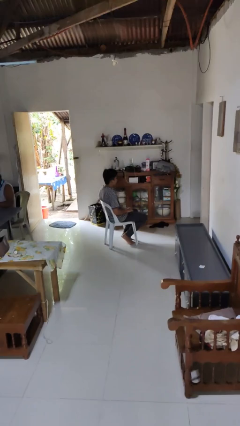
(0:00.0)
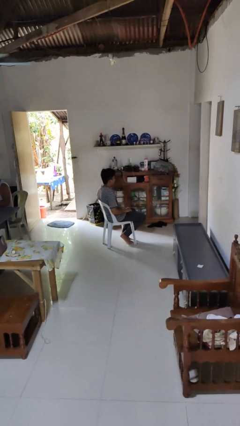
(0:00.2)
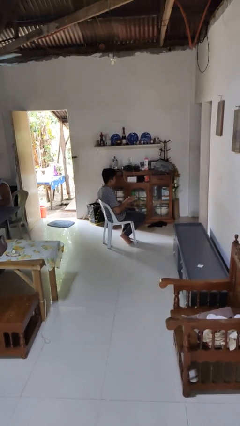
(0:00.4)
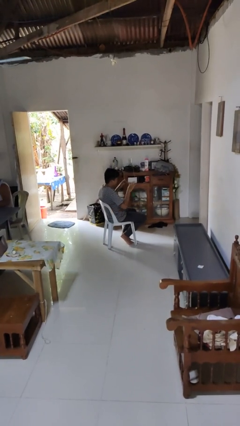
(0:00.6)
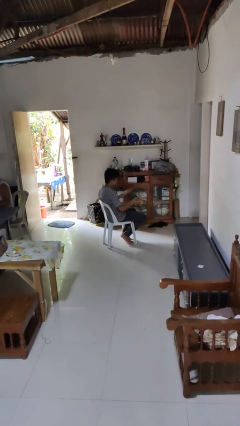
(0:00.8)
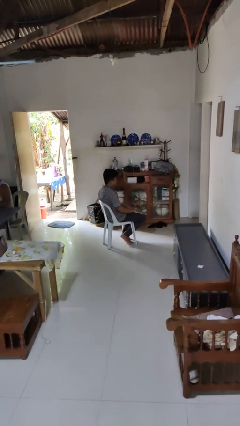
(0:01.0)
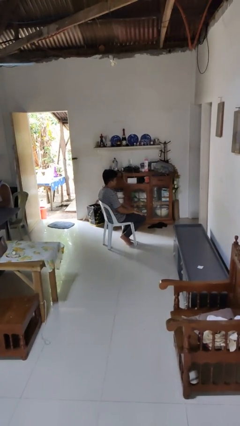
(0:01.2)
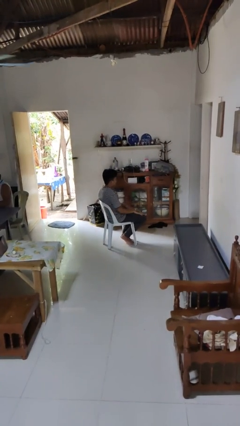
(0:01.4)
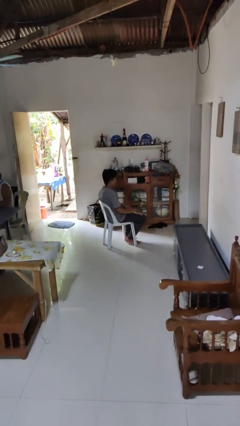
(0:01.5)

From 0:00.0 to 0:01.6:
person slaps hands on thighs

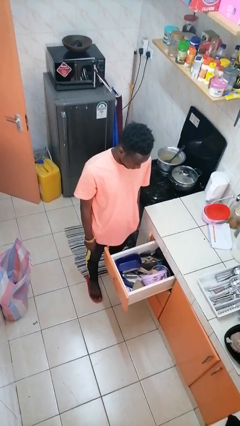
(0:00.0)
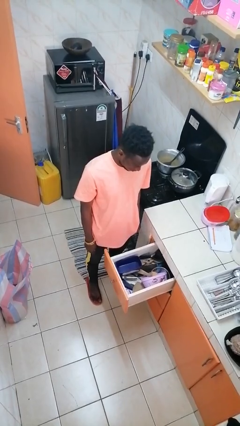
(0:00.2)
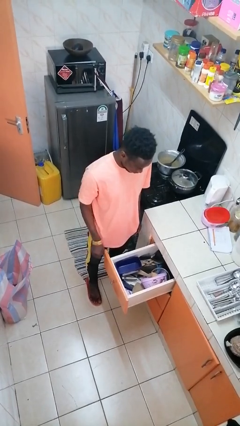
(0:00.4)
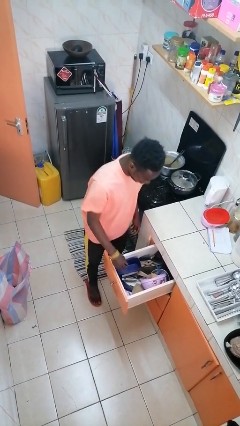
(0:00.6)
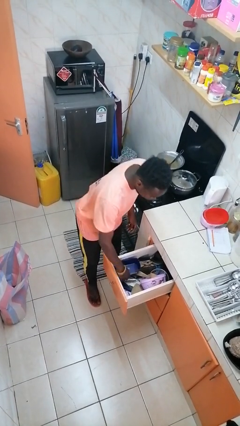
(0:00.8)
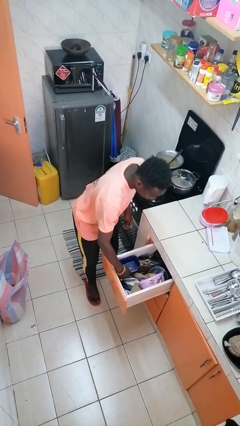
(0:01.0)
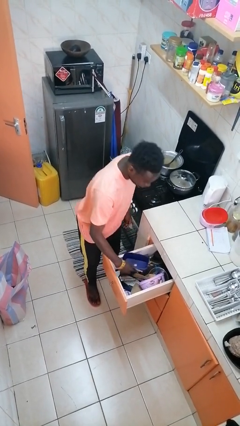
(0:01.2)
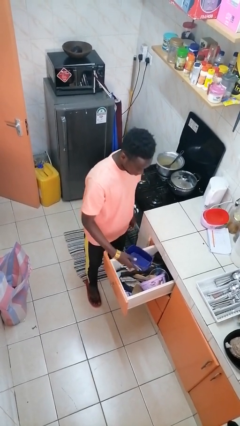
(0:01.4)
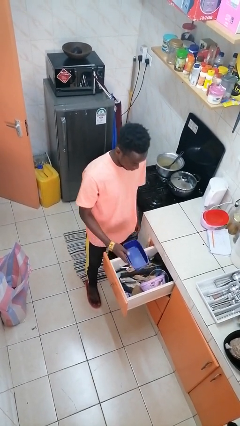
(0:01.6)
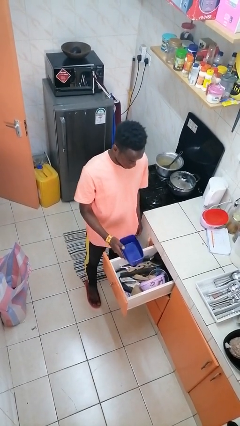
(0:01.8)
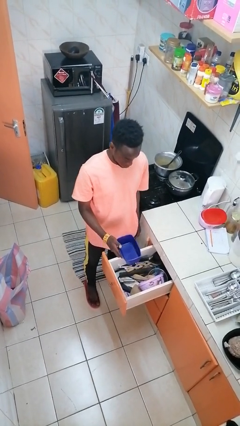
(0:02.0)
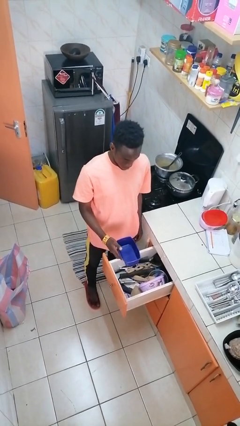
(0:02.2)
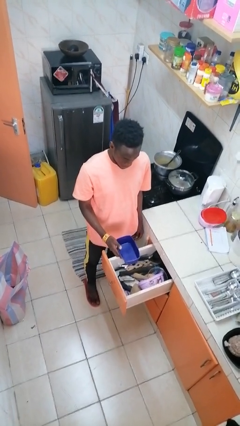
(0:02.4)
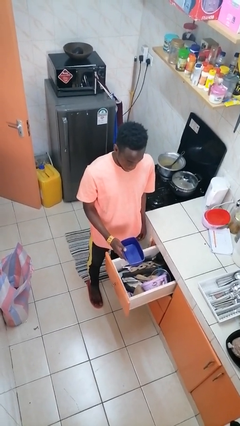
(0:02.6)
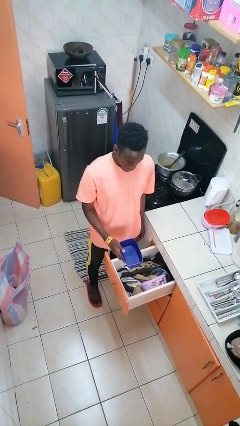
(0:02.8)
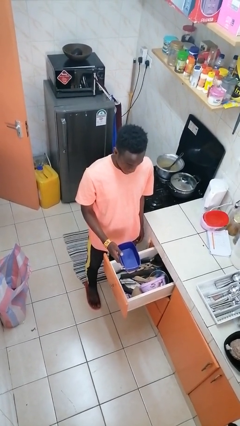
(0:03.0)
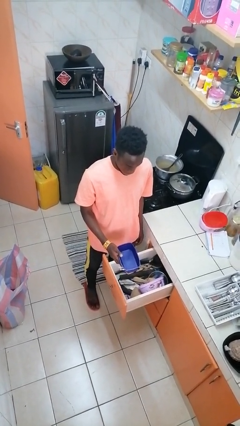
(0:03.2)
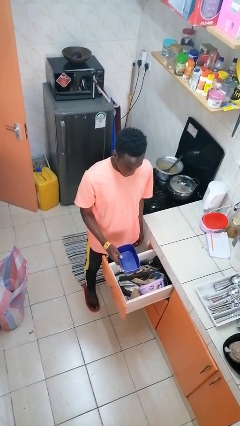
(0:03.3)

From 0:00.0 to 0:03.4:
person takes object from kitchen drawer

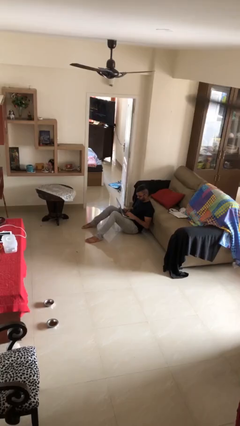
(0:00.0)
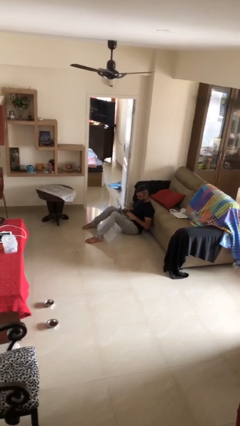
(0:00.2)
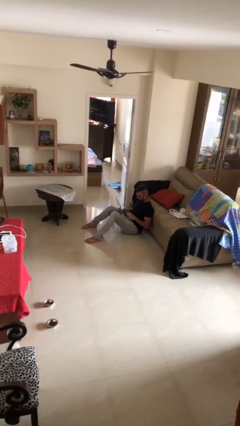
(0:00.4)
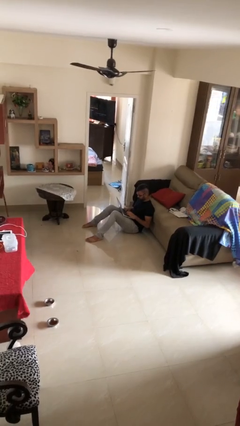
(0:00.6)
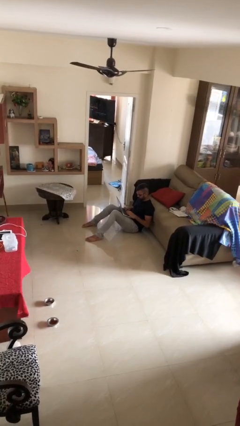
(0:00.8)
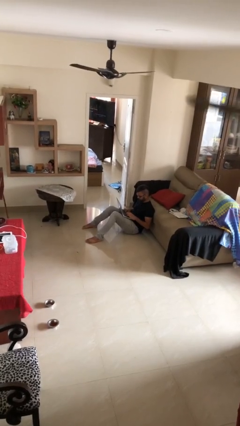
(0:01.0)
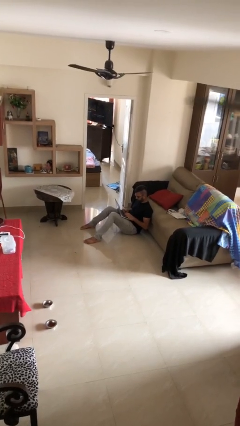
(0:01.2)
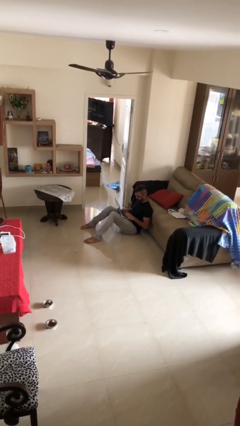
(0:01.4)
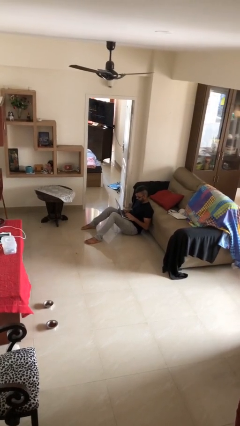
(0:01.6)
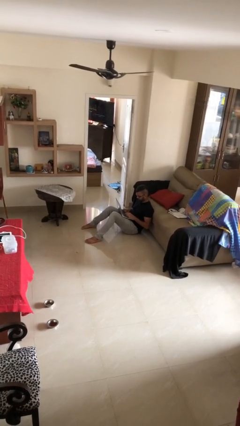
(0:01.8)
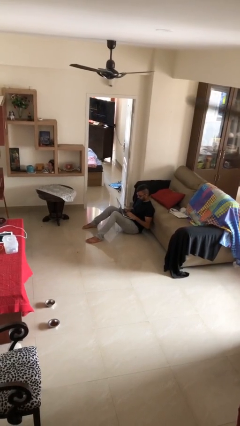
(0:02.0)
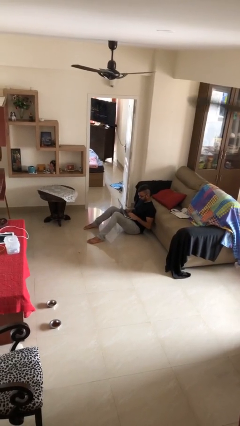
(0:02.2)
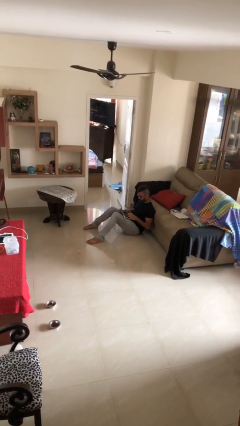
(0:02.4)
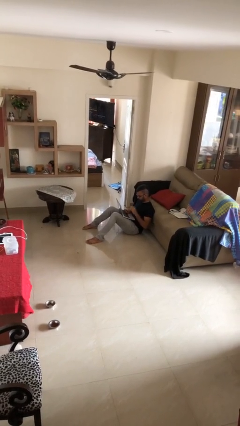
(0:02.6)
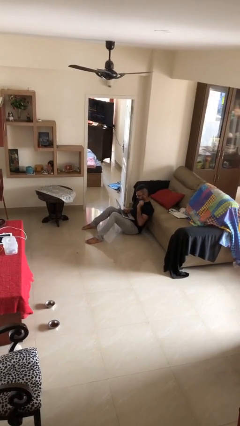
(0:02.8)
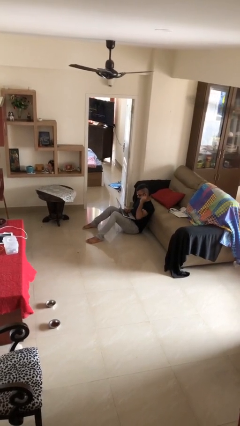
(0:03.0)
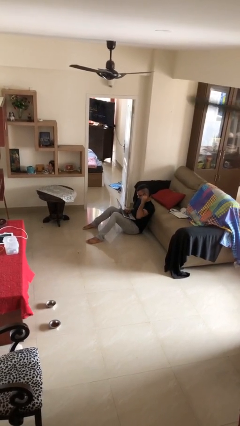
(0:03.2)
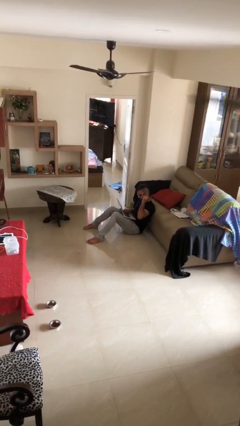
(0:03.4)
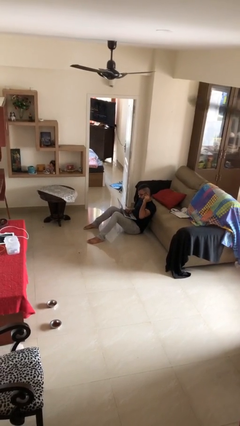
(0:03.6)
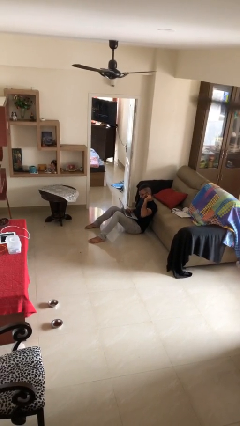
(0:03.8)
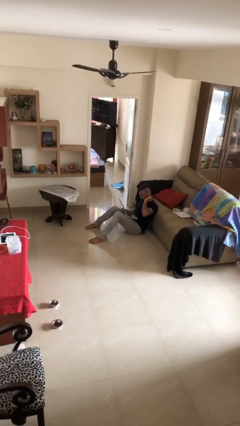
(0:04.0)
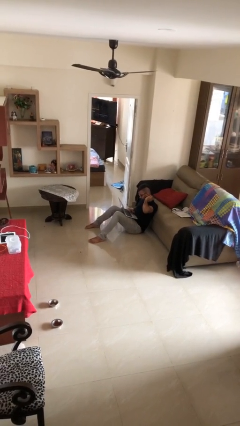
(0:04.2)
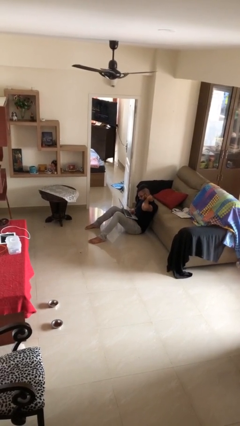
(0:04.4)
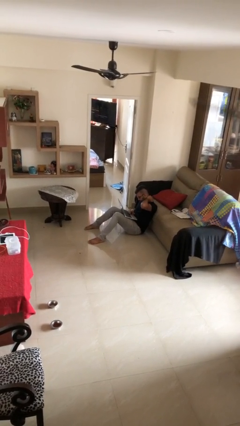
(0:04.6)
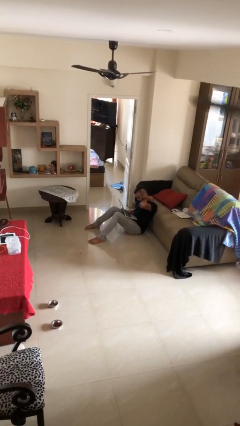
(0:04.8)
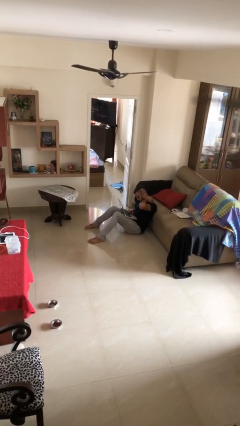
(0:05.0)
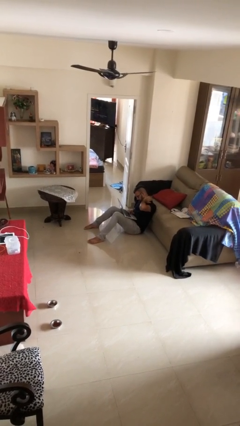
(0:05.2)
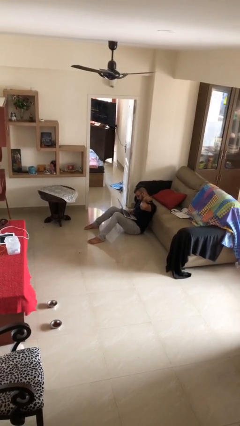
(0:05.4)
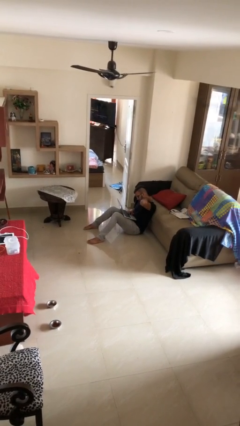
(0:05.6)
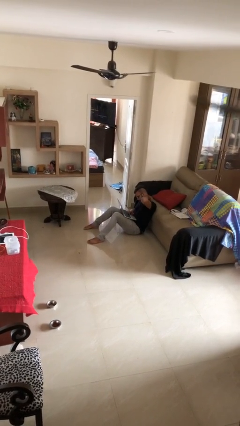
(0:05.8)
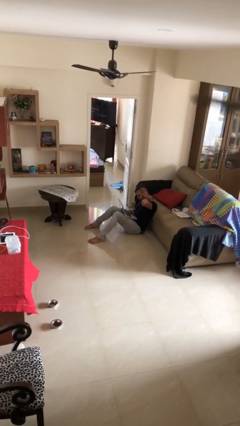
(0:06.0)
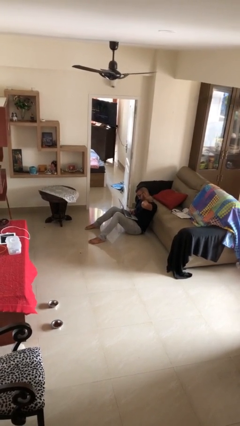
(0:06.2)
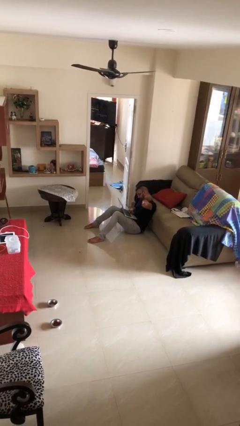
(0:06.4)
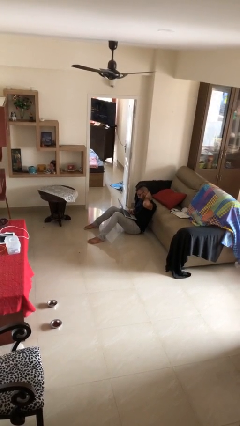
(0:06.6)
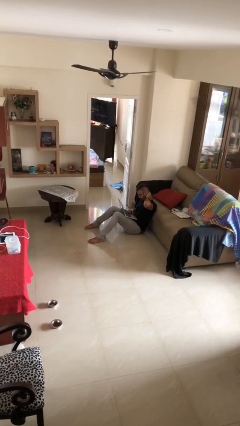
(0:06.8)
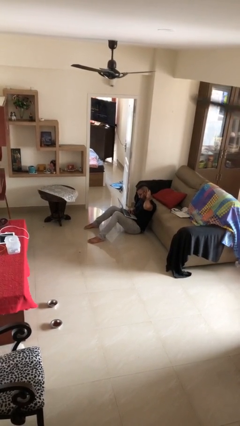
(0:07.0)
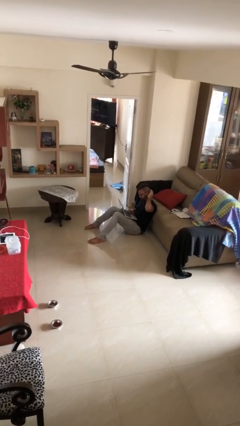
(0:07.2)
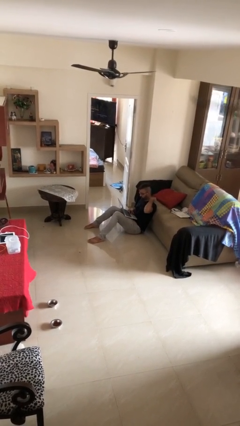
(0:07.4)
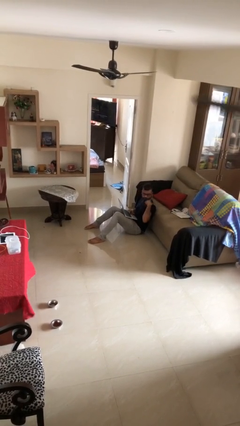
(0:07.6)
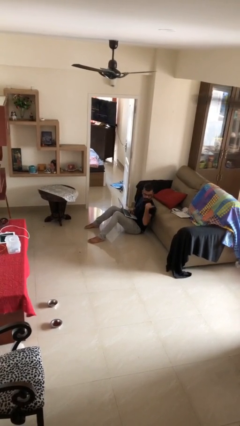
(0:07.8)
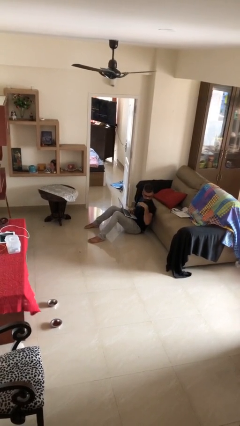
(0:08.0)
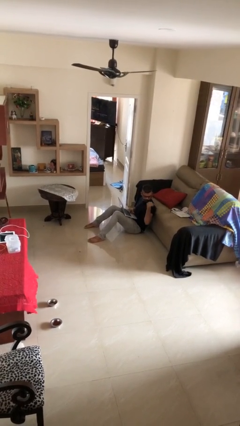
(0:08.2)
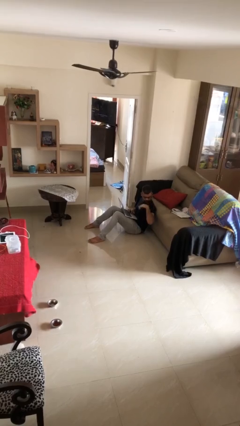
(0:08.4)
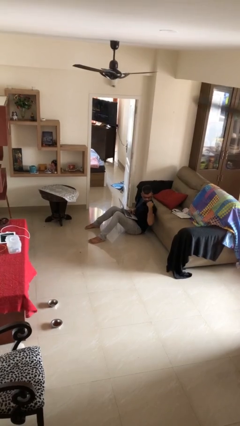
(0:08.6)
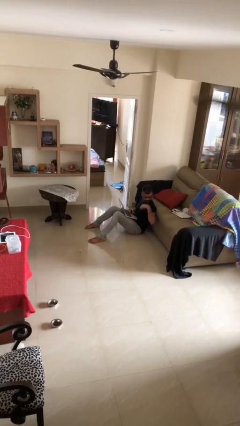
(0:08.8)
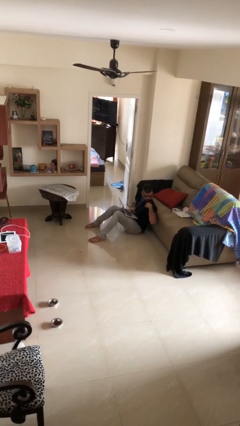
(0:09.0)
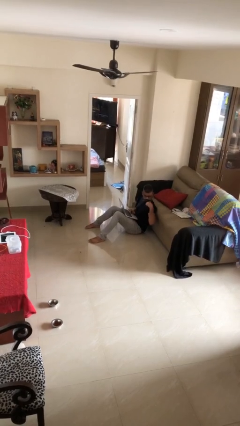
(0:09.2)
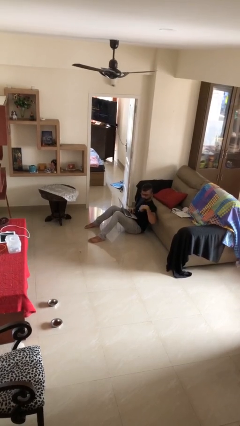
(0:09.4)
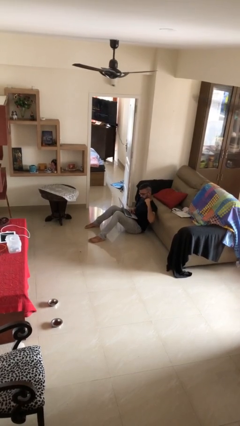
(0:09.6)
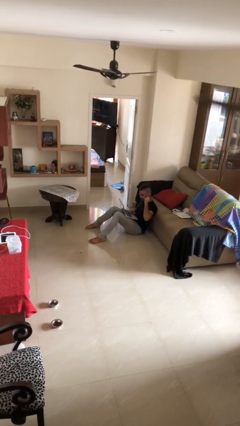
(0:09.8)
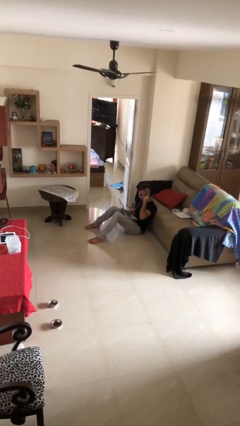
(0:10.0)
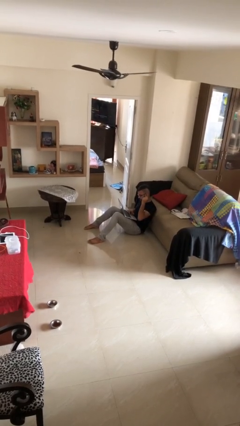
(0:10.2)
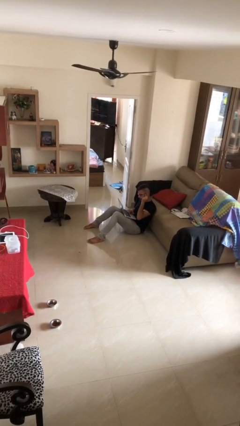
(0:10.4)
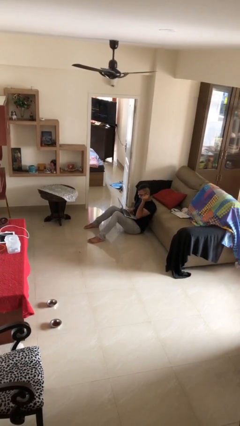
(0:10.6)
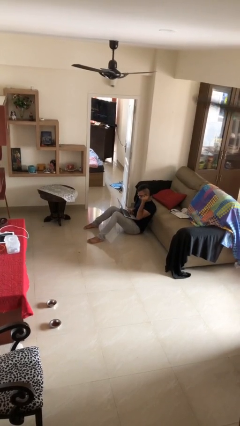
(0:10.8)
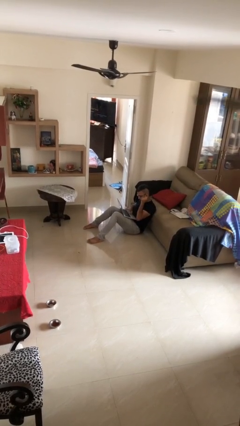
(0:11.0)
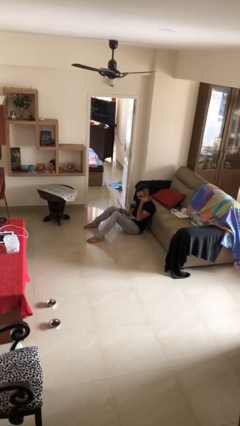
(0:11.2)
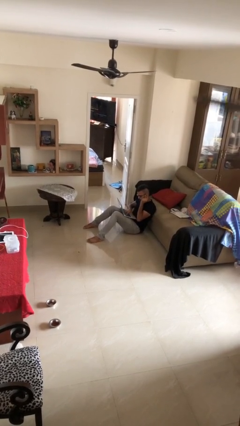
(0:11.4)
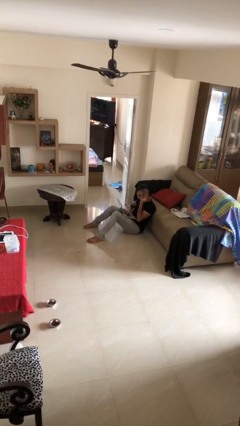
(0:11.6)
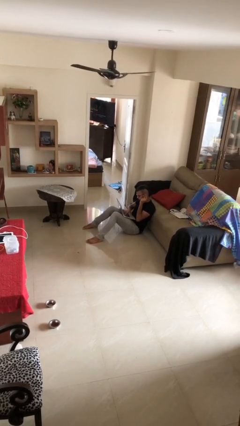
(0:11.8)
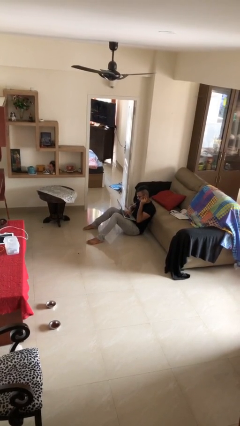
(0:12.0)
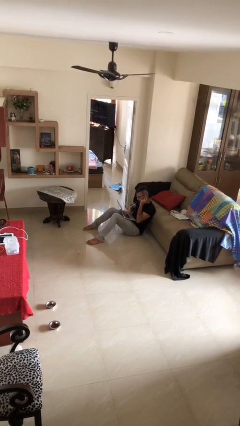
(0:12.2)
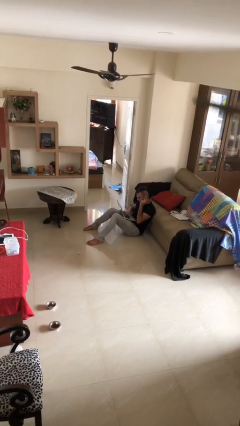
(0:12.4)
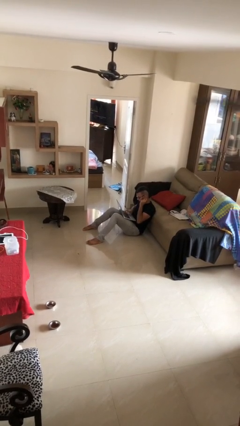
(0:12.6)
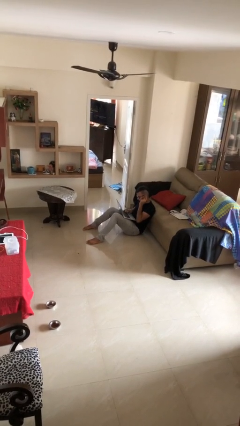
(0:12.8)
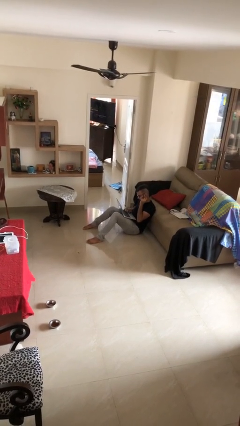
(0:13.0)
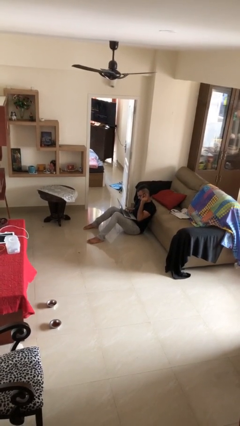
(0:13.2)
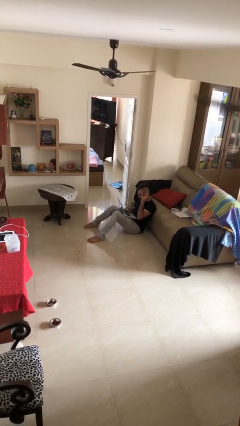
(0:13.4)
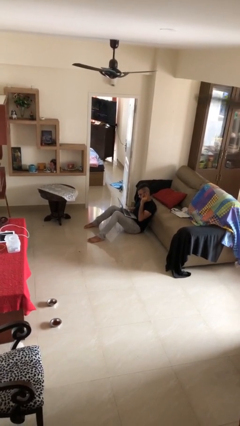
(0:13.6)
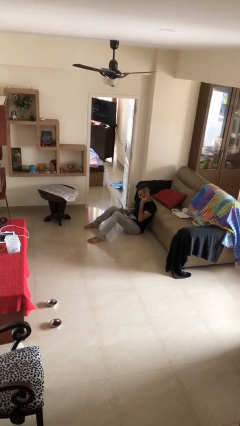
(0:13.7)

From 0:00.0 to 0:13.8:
person interacts with laptop
